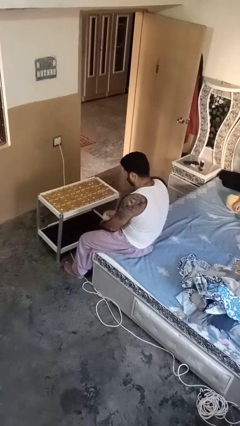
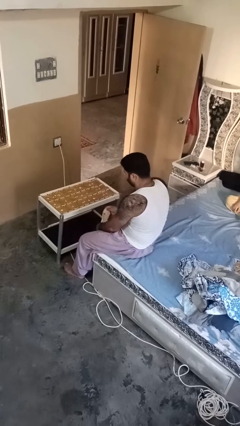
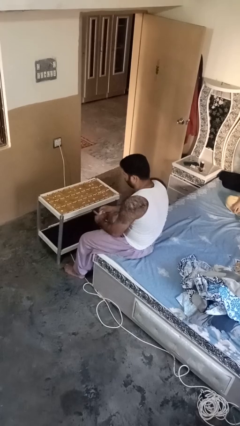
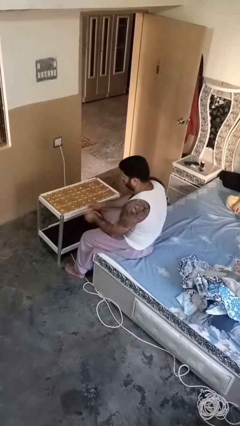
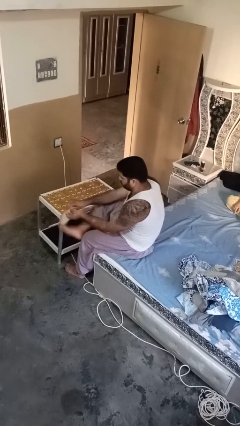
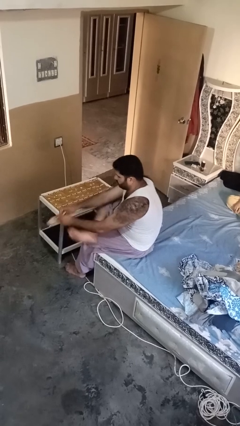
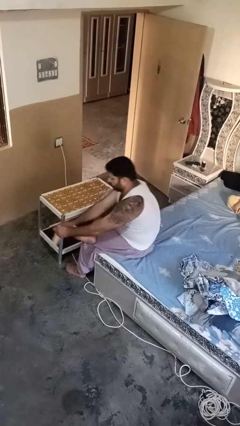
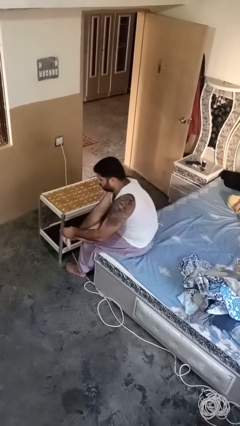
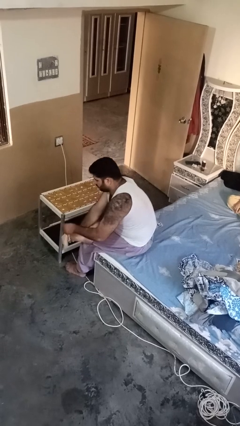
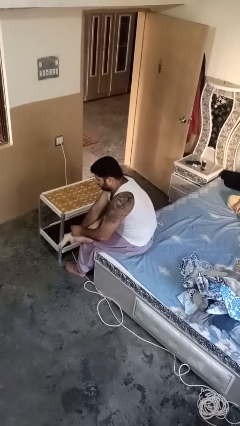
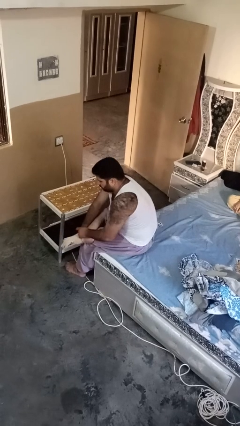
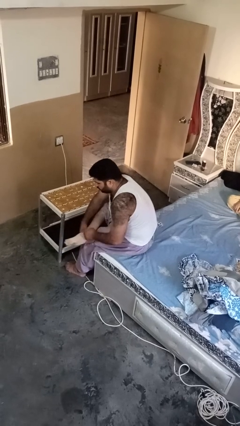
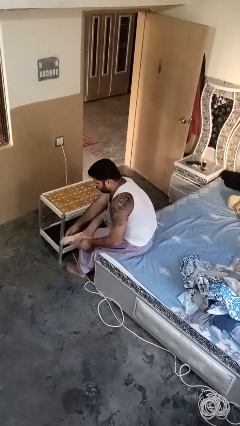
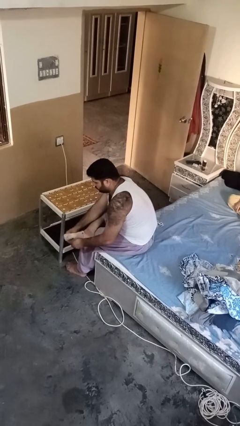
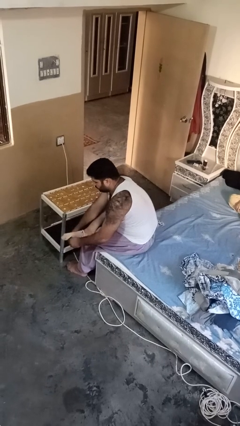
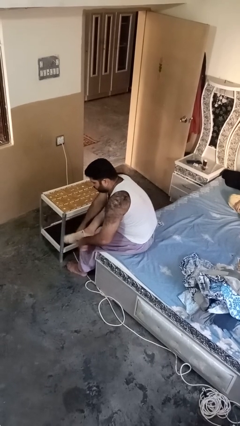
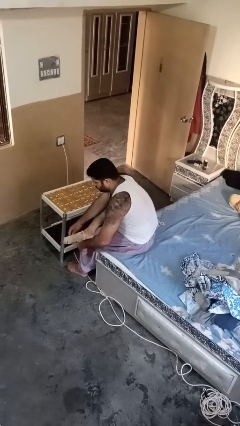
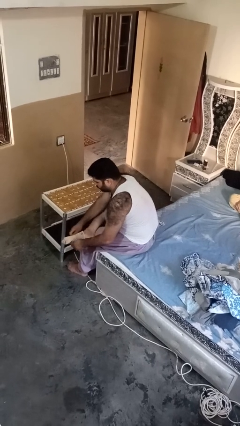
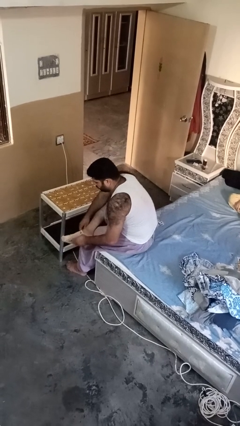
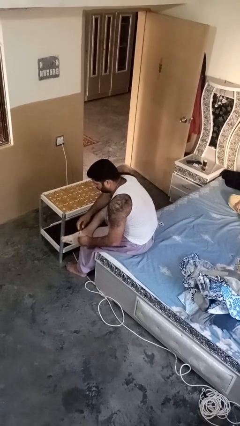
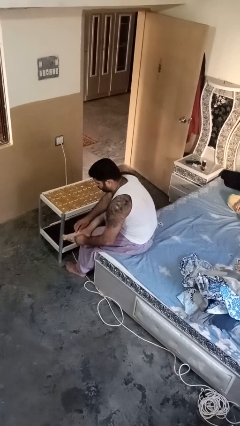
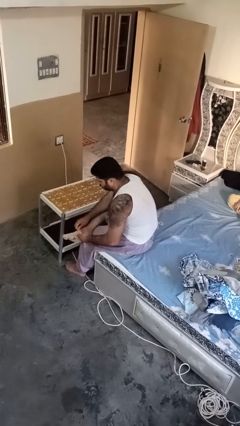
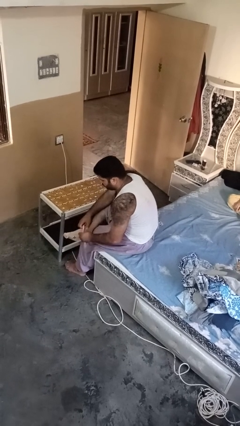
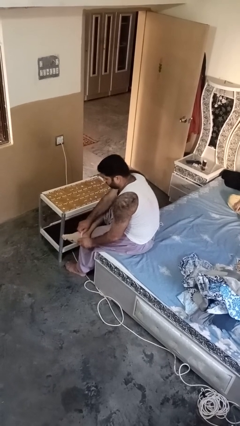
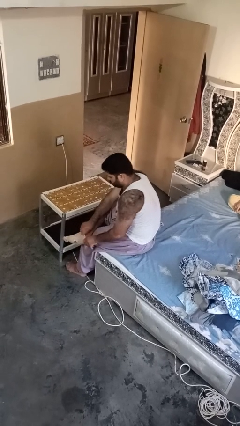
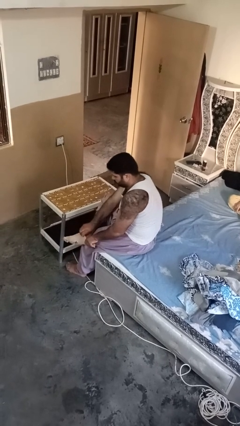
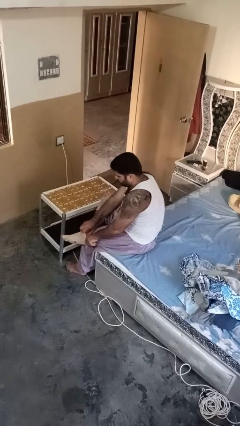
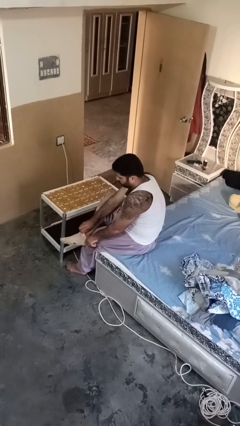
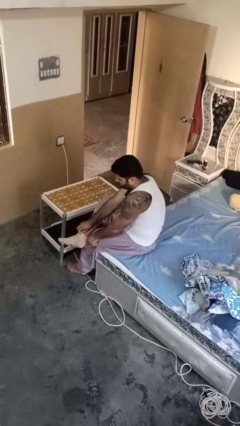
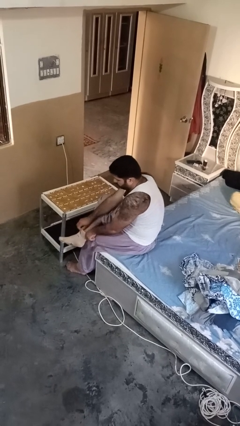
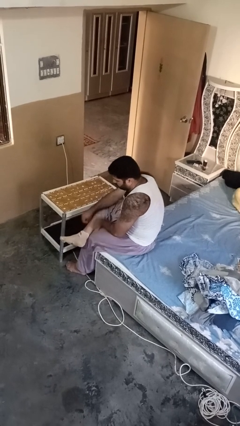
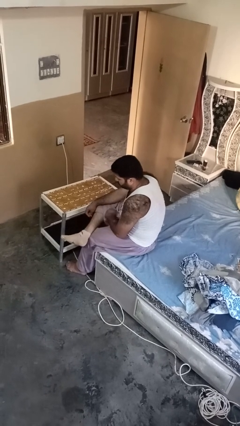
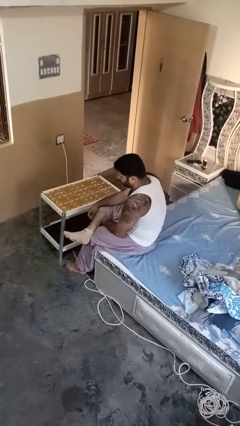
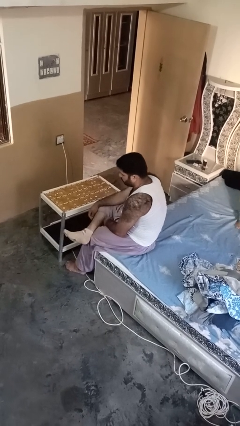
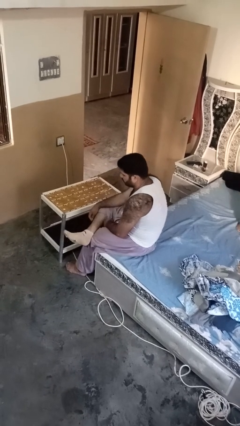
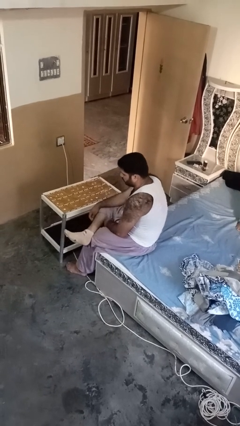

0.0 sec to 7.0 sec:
person puts on socks

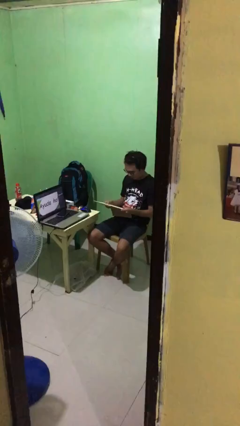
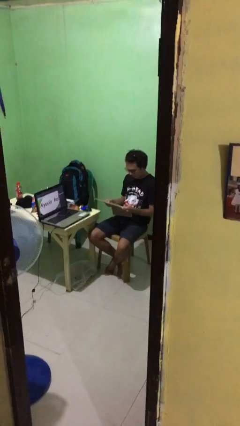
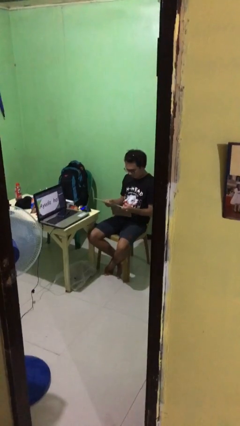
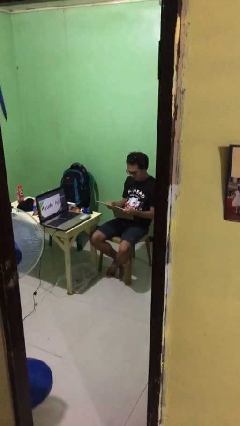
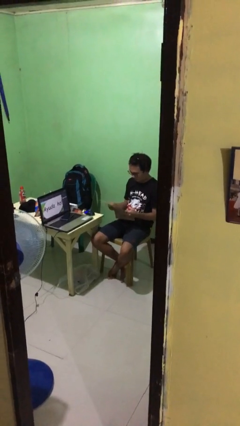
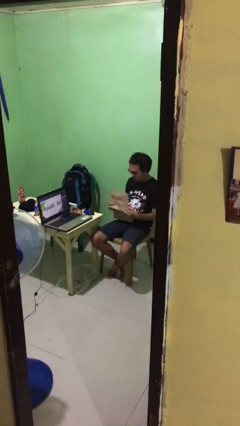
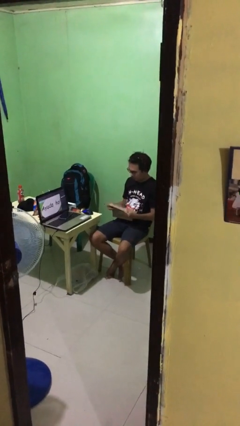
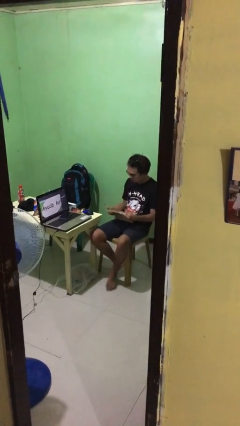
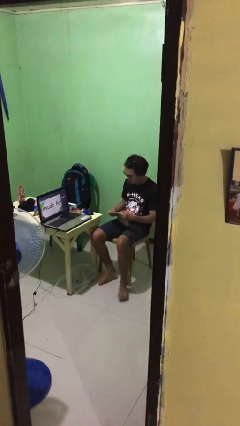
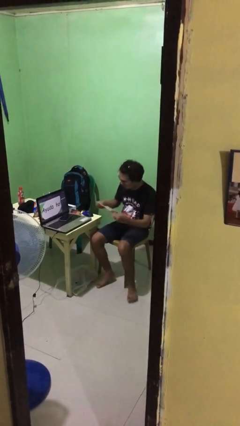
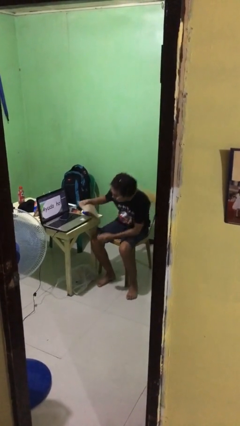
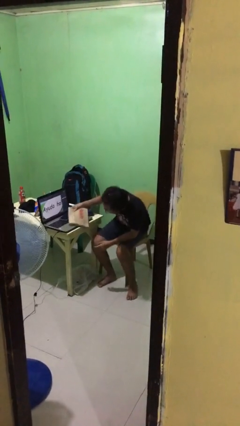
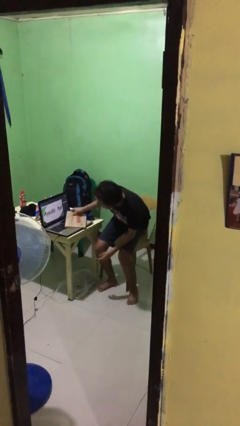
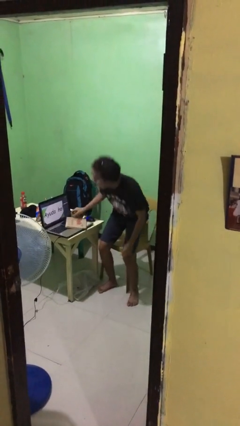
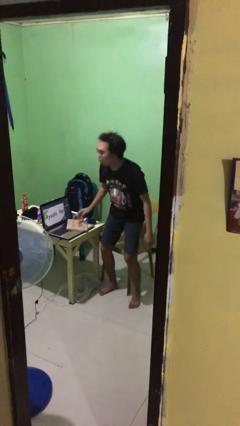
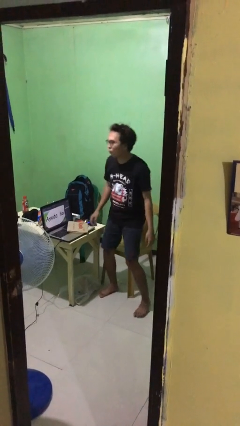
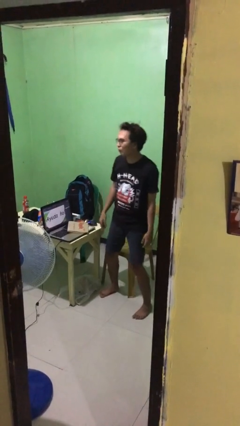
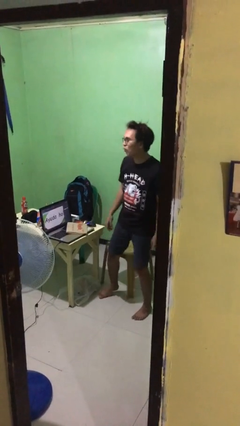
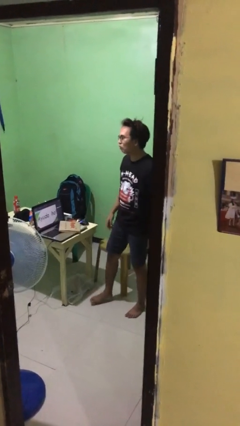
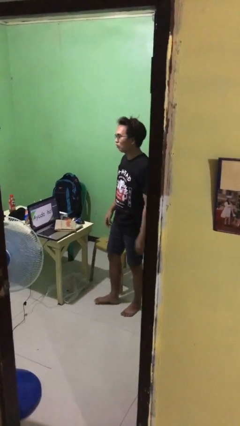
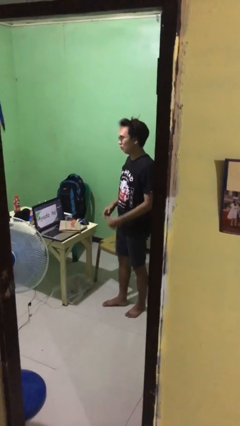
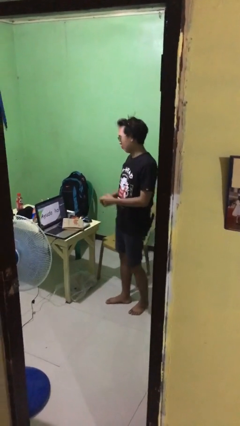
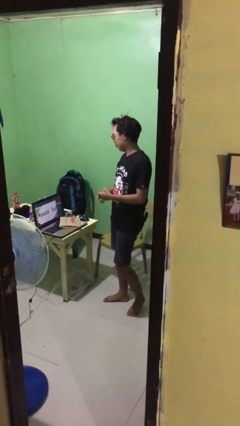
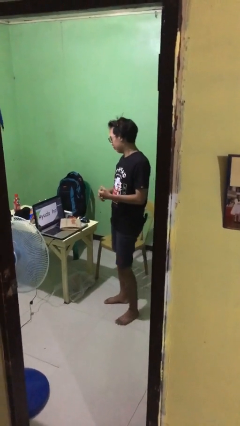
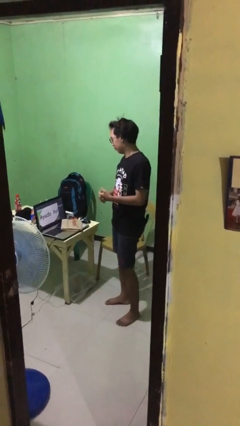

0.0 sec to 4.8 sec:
person stands up

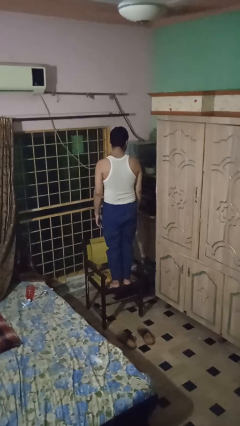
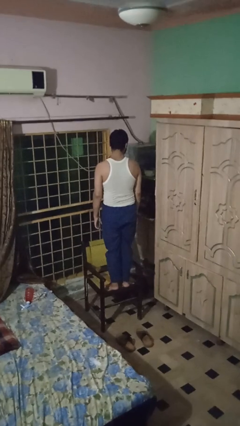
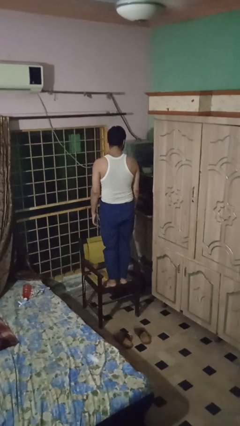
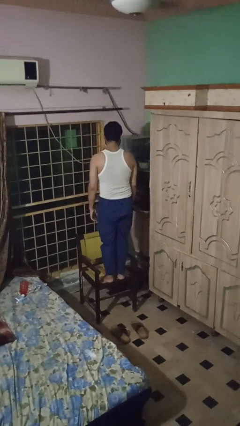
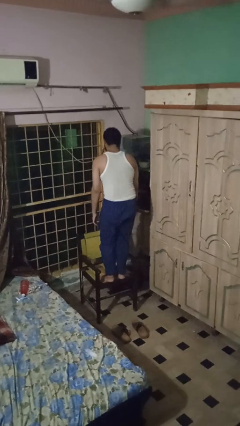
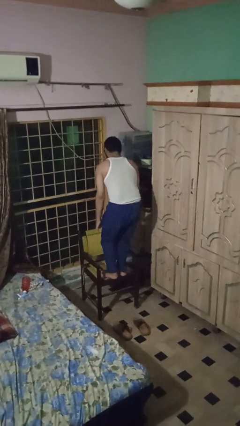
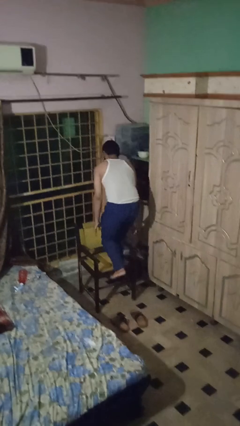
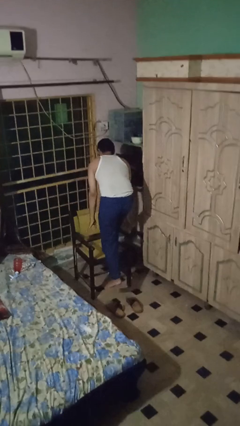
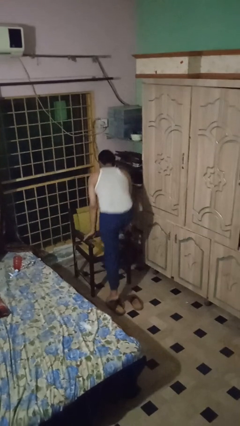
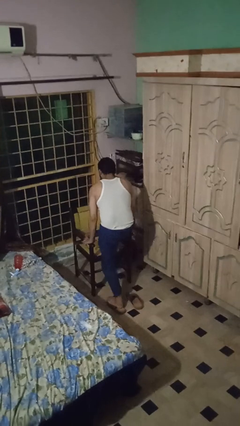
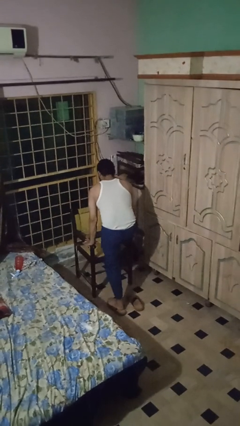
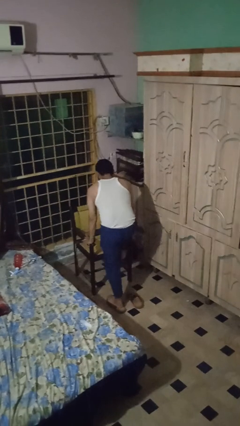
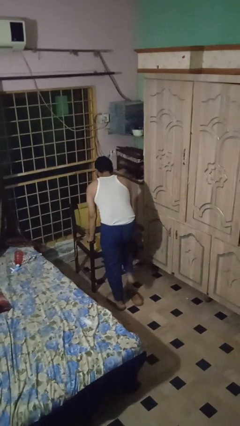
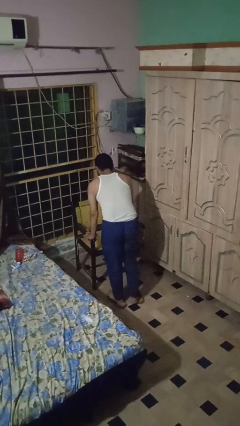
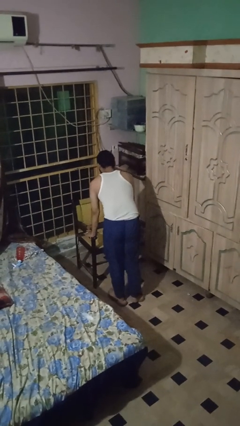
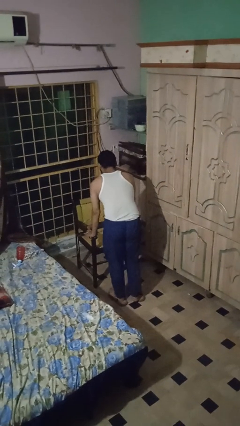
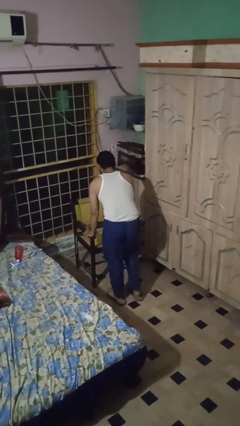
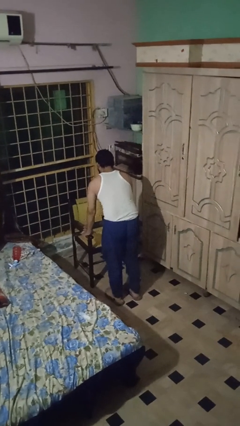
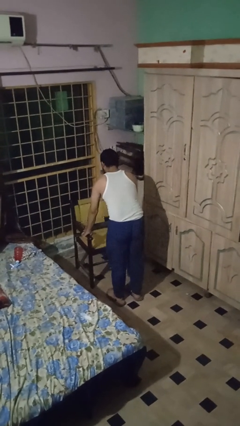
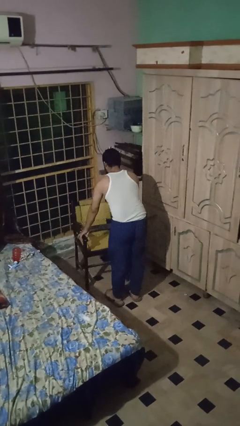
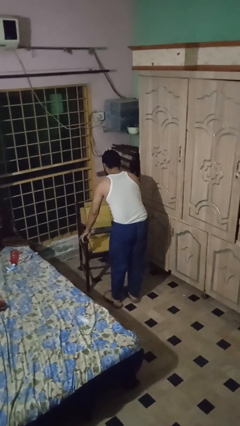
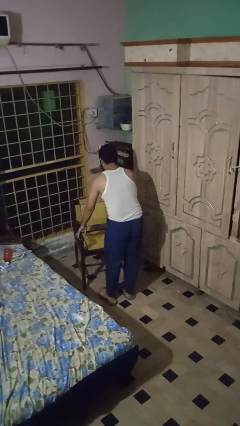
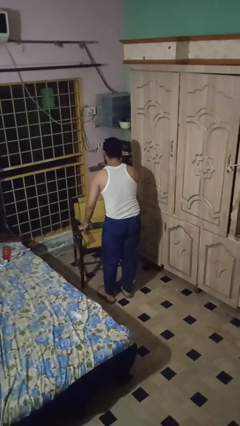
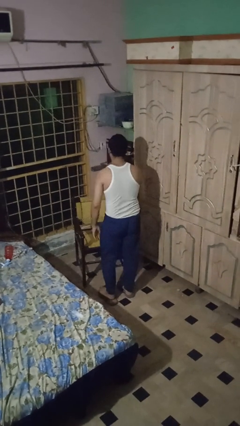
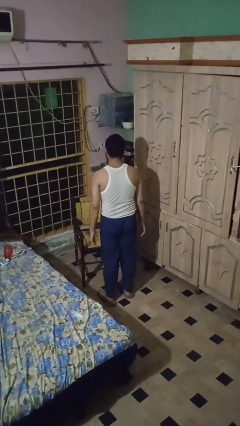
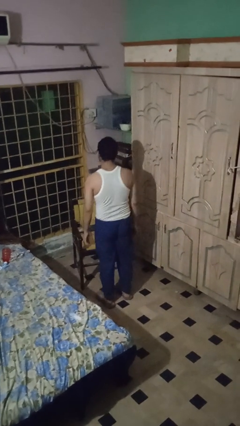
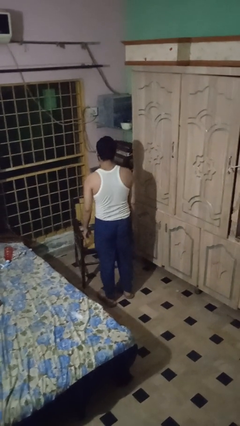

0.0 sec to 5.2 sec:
person climbs off chair

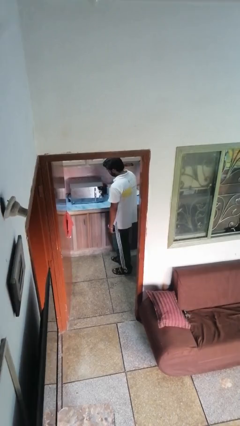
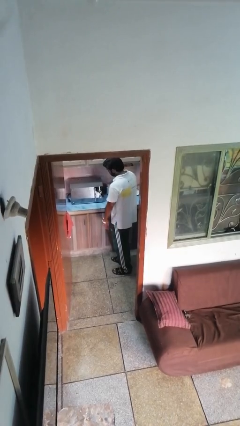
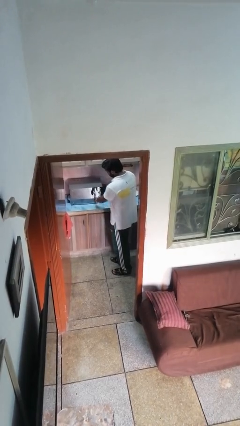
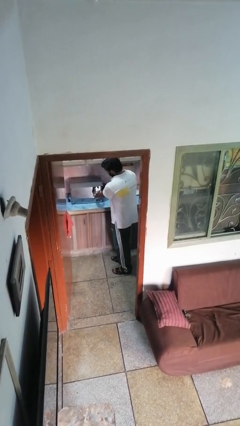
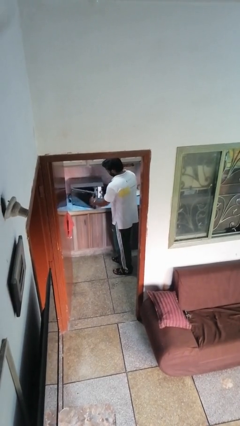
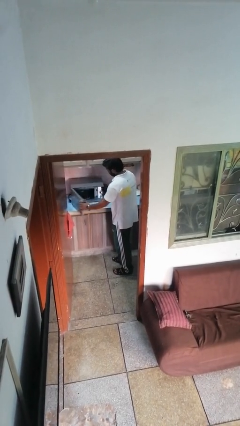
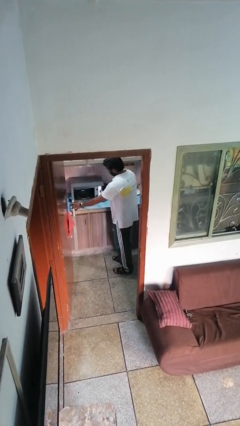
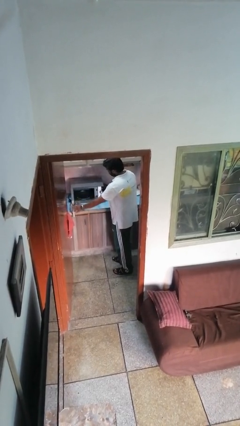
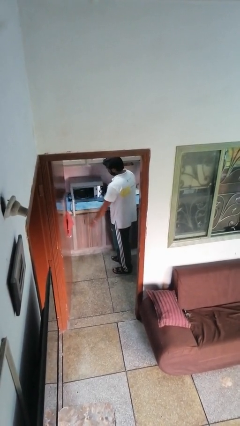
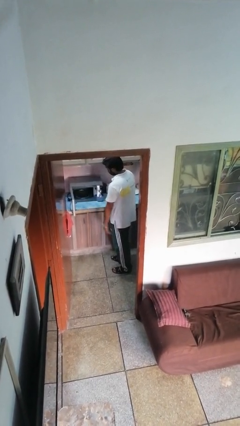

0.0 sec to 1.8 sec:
person opens microwave
